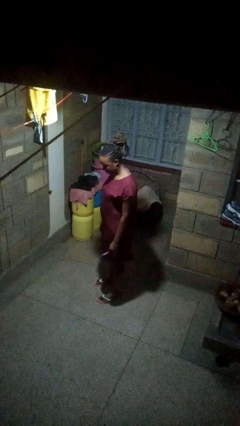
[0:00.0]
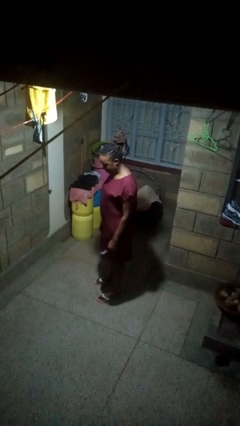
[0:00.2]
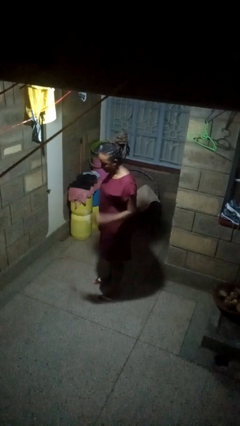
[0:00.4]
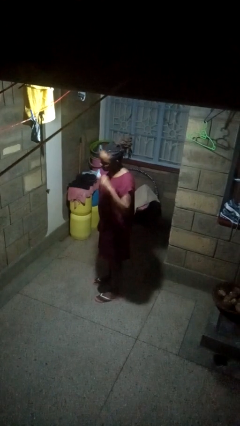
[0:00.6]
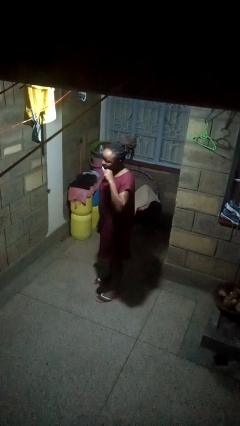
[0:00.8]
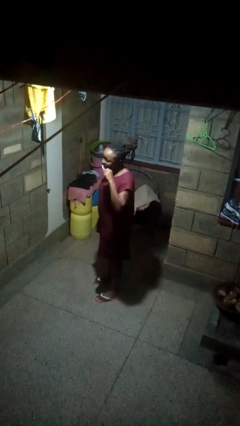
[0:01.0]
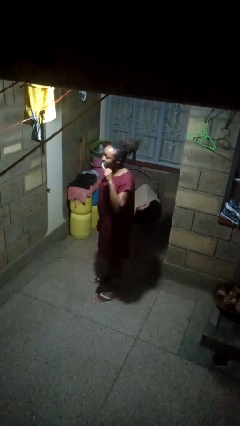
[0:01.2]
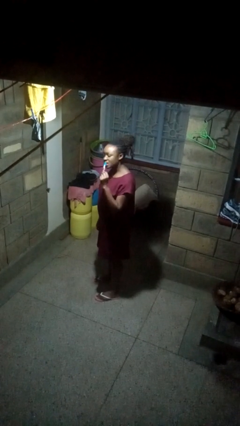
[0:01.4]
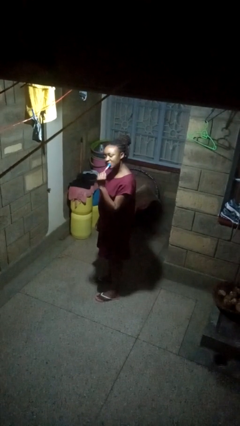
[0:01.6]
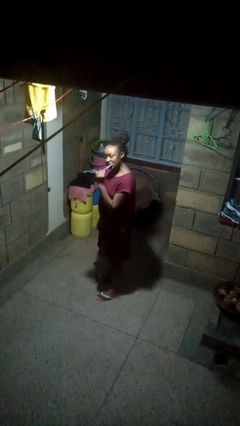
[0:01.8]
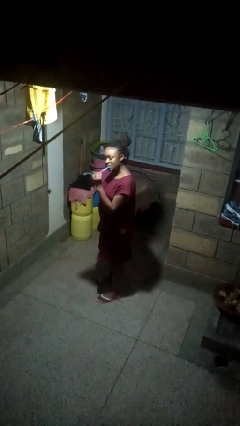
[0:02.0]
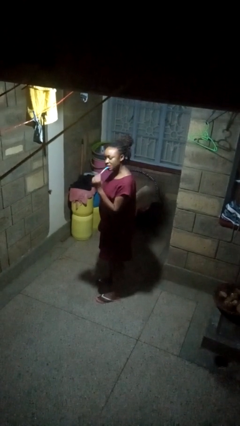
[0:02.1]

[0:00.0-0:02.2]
person brushes teeth

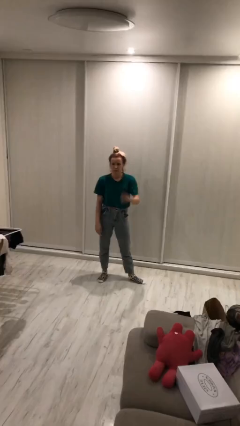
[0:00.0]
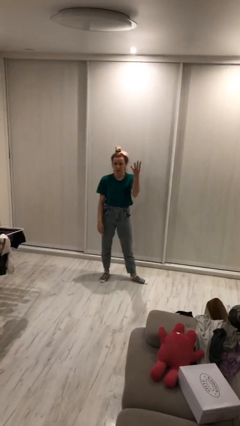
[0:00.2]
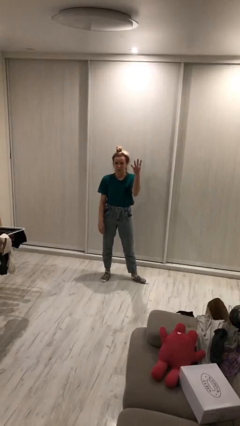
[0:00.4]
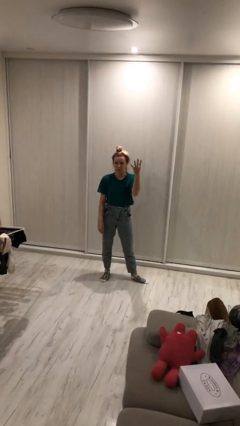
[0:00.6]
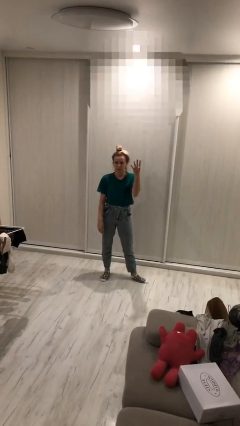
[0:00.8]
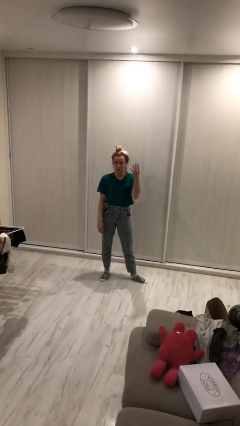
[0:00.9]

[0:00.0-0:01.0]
person gestures number four

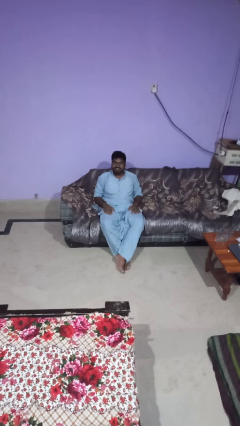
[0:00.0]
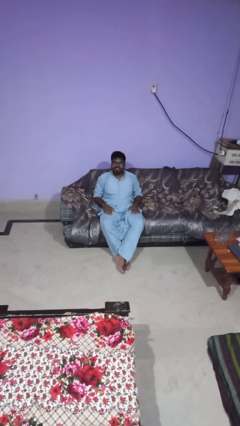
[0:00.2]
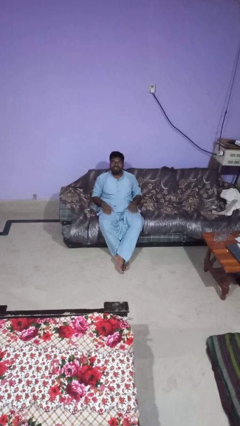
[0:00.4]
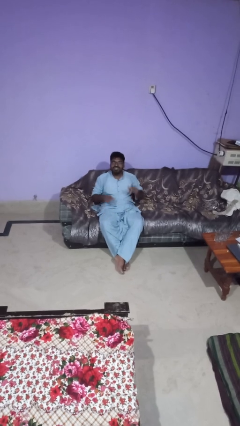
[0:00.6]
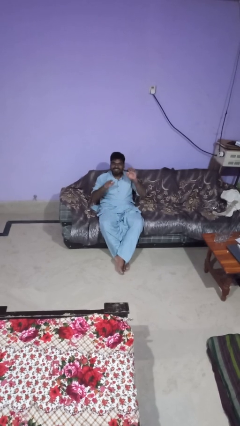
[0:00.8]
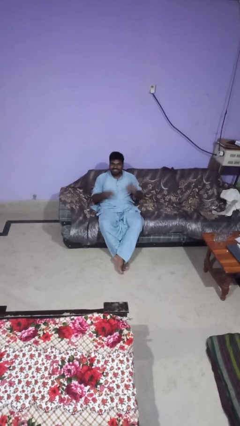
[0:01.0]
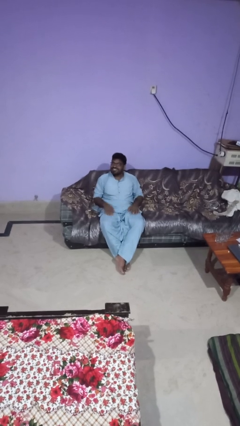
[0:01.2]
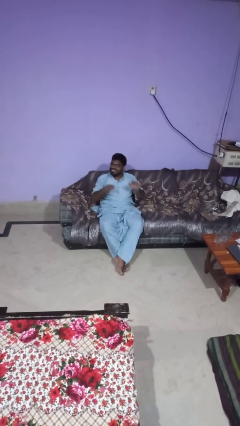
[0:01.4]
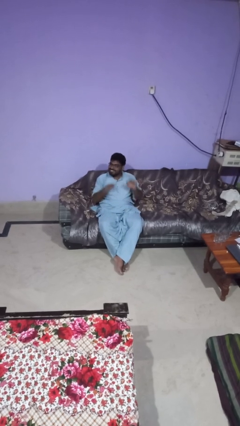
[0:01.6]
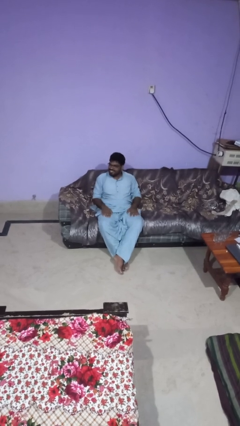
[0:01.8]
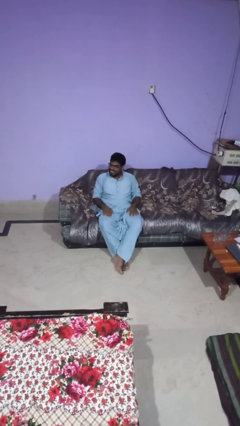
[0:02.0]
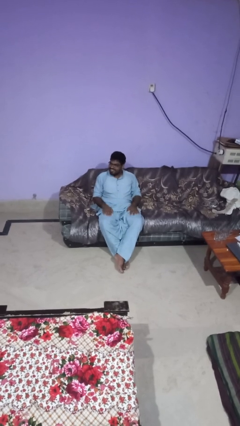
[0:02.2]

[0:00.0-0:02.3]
person slaps hands on thighs

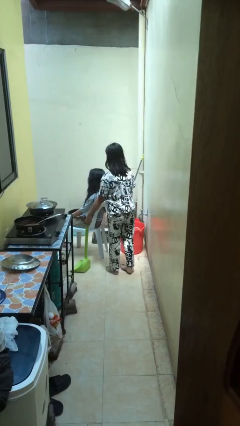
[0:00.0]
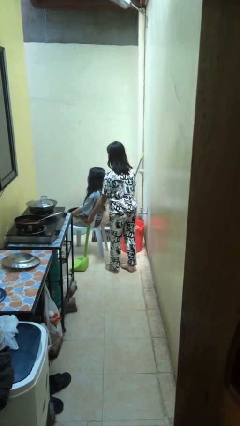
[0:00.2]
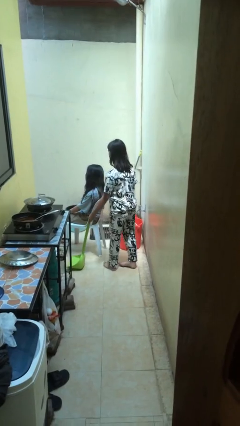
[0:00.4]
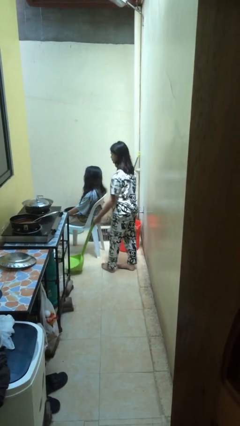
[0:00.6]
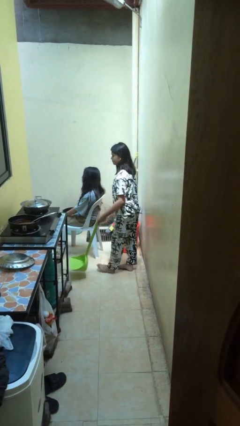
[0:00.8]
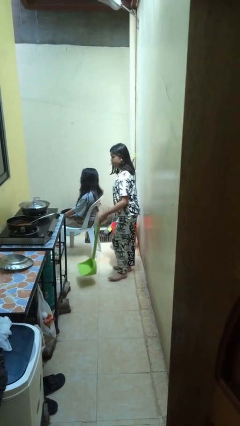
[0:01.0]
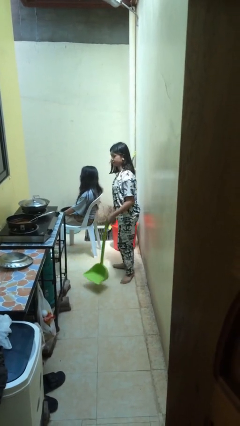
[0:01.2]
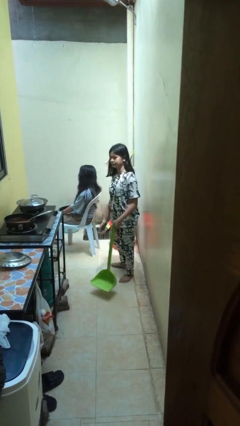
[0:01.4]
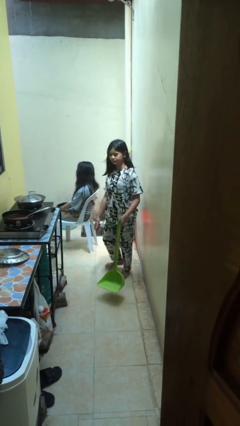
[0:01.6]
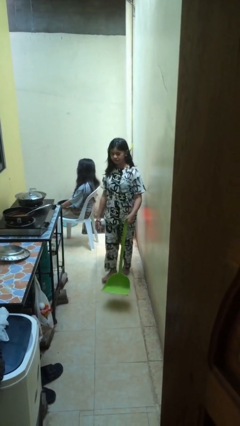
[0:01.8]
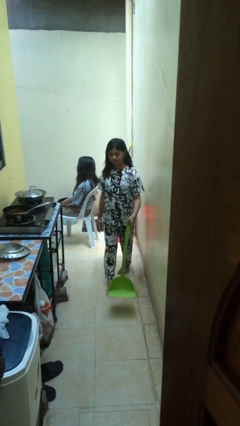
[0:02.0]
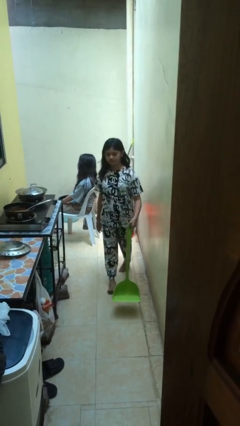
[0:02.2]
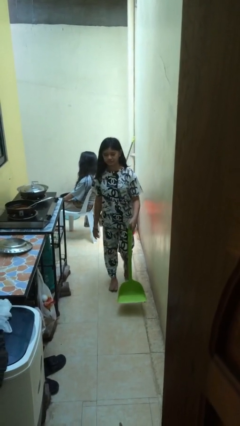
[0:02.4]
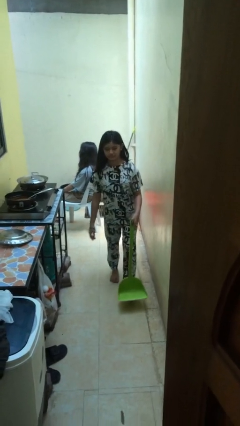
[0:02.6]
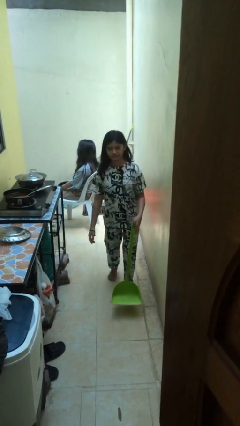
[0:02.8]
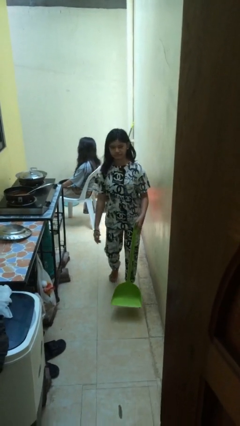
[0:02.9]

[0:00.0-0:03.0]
person steals object from person

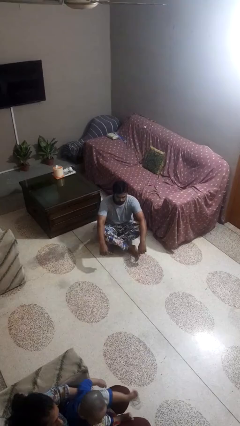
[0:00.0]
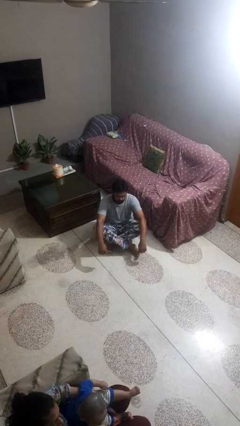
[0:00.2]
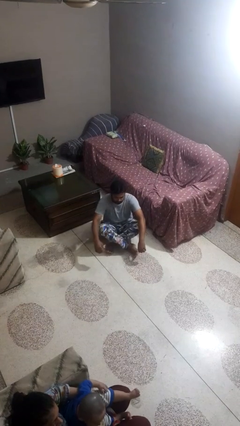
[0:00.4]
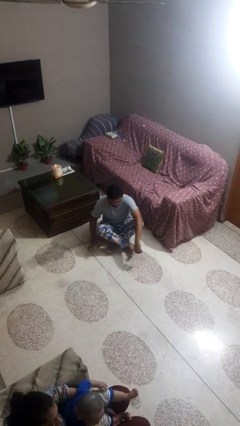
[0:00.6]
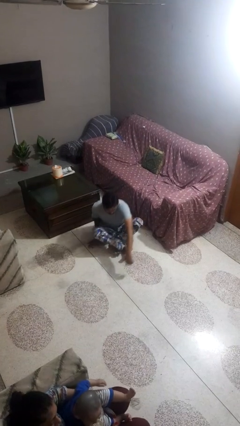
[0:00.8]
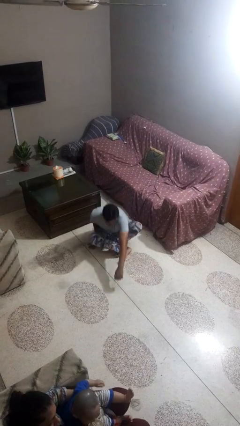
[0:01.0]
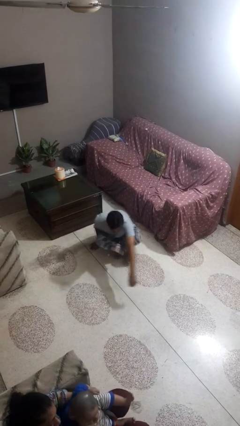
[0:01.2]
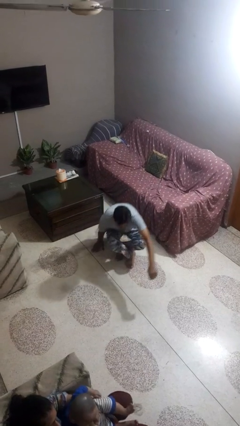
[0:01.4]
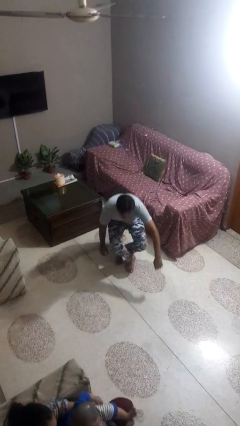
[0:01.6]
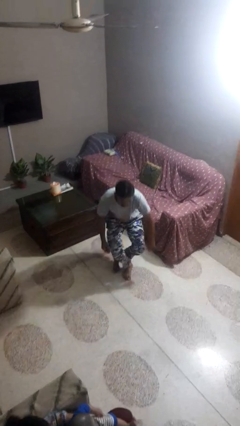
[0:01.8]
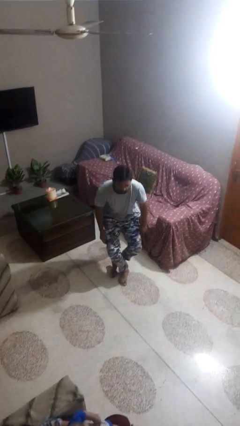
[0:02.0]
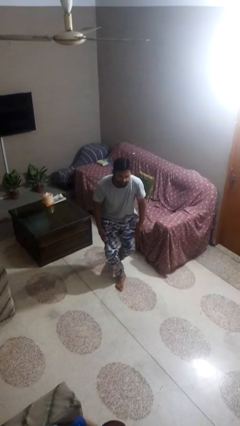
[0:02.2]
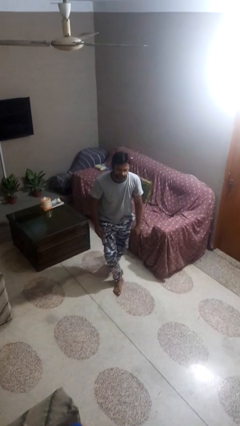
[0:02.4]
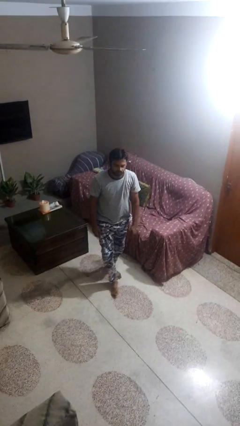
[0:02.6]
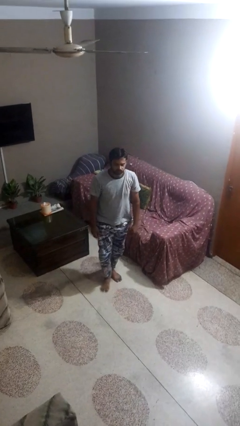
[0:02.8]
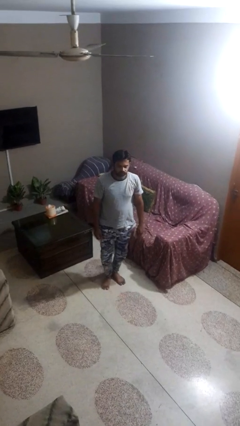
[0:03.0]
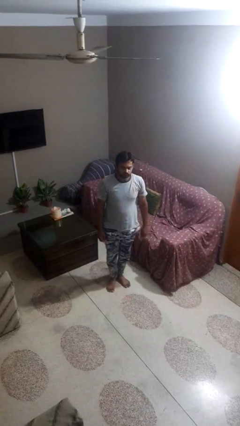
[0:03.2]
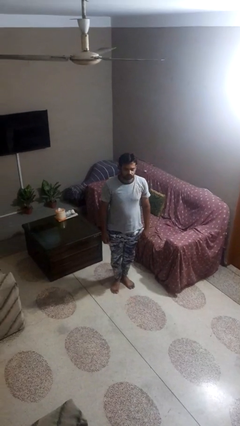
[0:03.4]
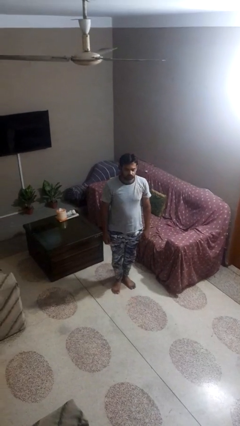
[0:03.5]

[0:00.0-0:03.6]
person stands up from floor

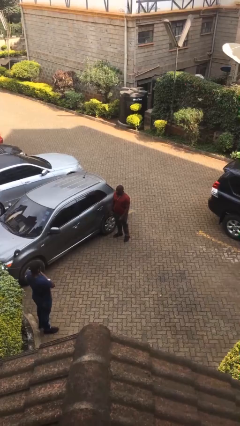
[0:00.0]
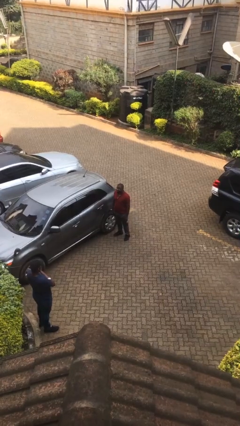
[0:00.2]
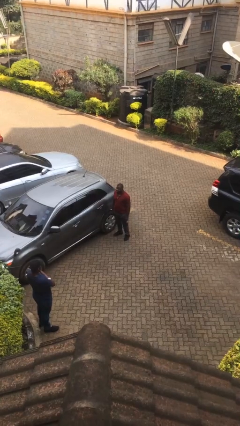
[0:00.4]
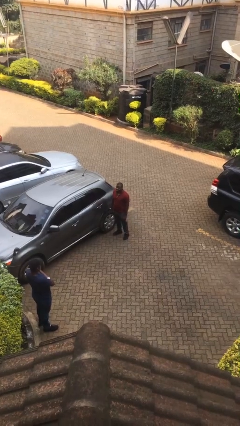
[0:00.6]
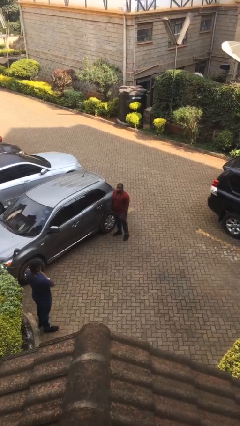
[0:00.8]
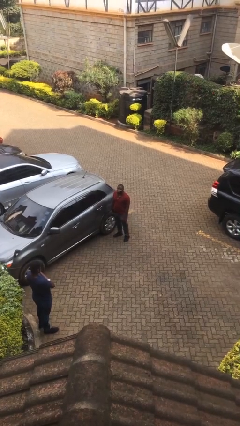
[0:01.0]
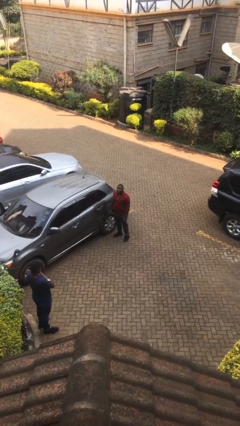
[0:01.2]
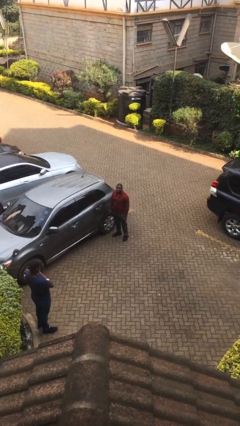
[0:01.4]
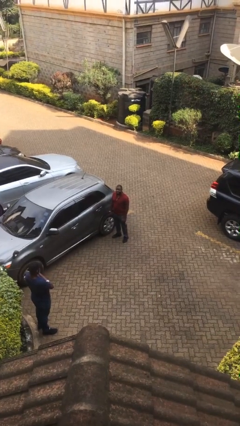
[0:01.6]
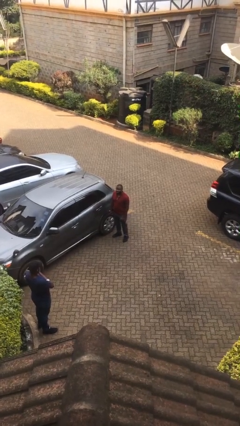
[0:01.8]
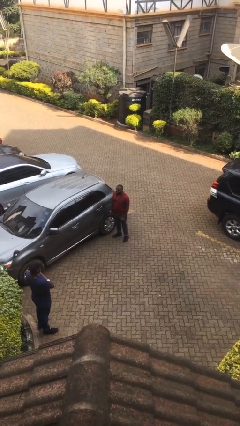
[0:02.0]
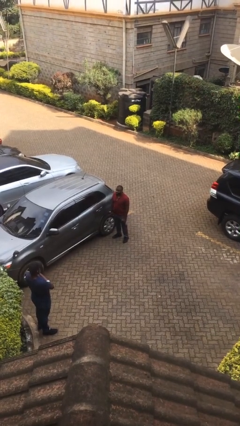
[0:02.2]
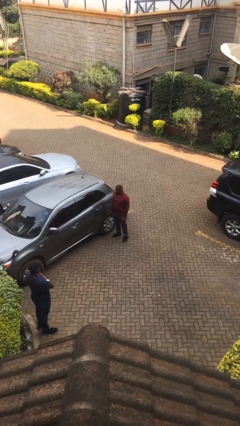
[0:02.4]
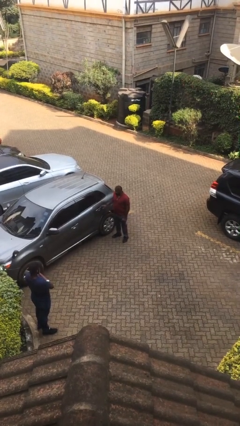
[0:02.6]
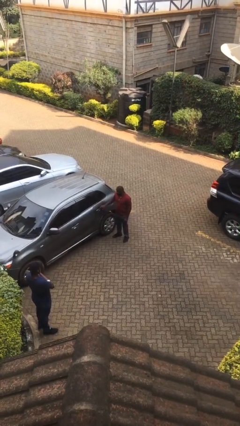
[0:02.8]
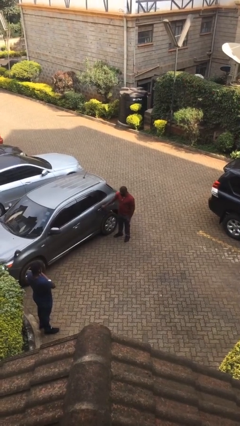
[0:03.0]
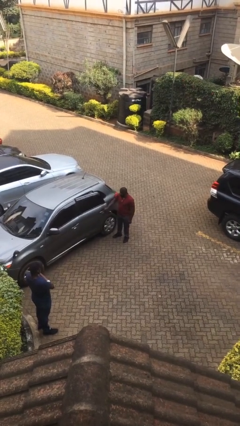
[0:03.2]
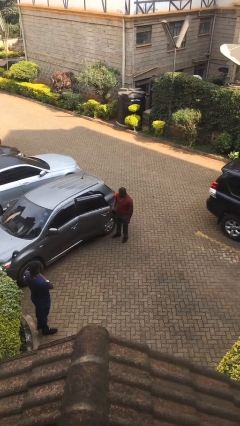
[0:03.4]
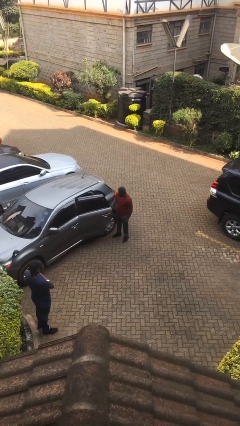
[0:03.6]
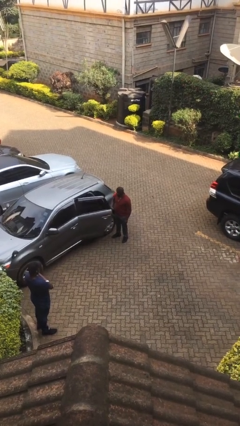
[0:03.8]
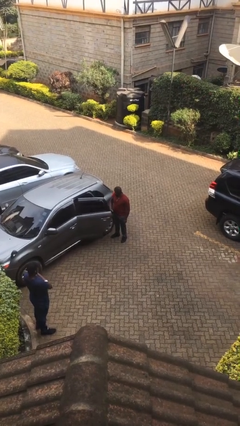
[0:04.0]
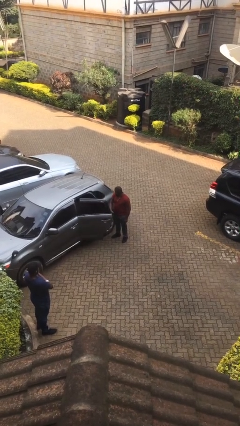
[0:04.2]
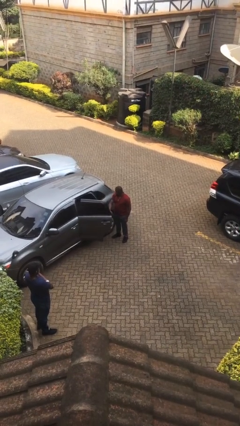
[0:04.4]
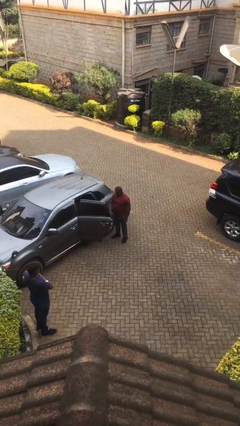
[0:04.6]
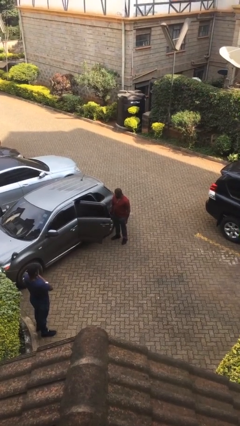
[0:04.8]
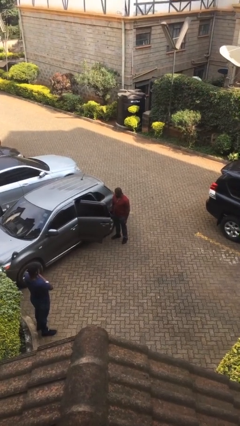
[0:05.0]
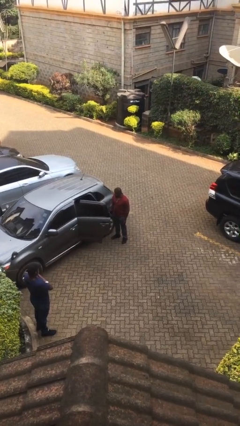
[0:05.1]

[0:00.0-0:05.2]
person opens car door
